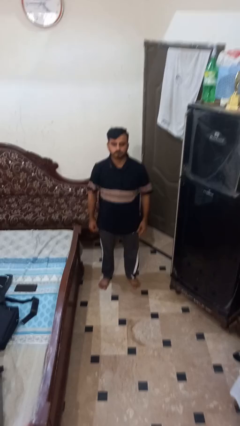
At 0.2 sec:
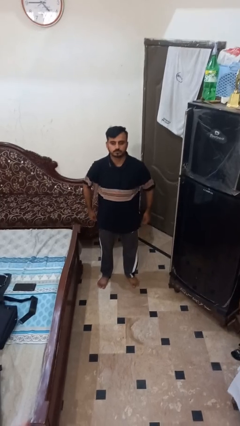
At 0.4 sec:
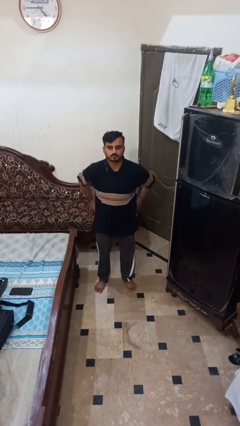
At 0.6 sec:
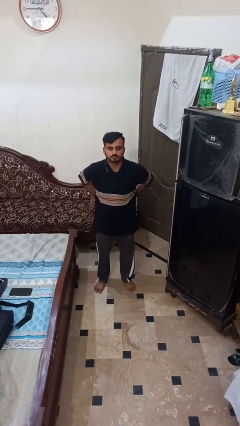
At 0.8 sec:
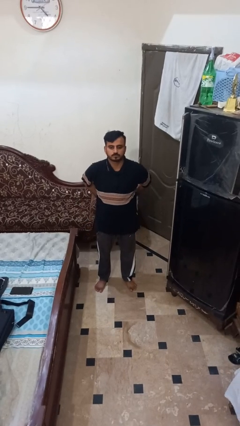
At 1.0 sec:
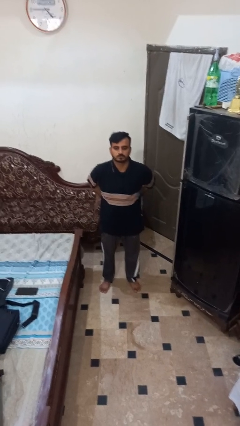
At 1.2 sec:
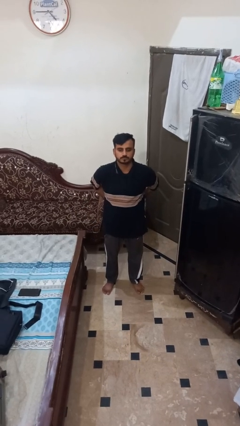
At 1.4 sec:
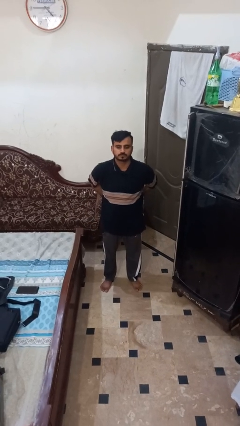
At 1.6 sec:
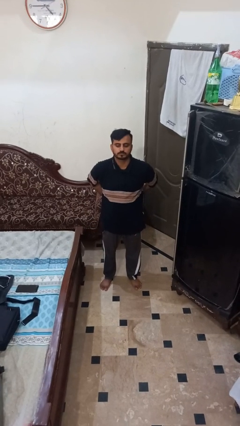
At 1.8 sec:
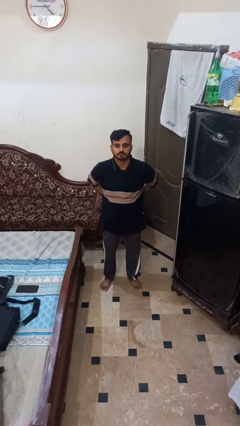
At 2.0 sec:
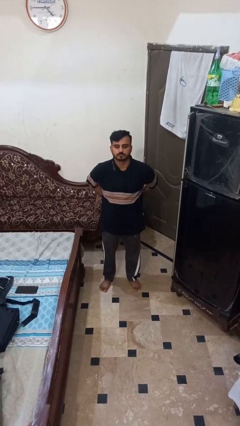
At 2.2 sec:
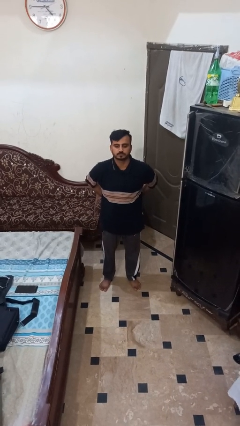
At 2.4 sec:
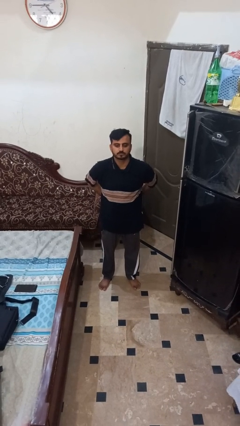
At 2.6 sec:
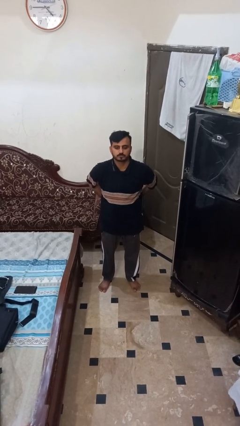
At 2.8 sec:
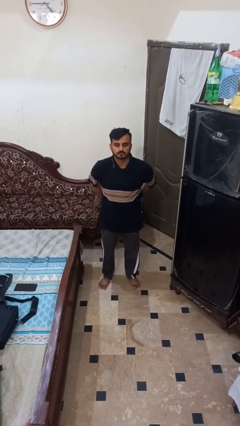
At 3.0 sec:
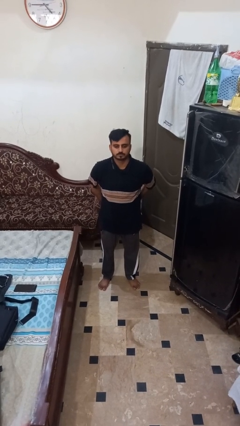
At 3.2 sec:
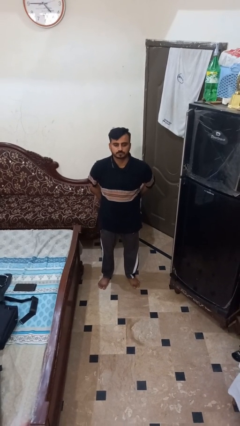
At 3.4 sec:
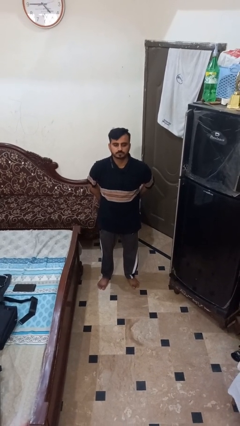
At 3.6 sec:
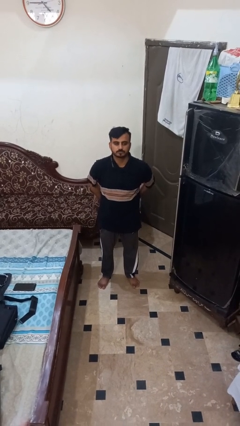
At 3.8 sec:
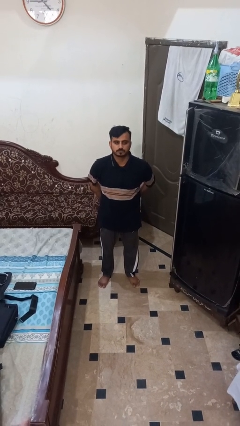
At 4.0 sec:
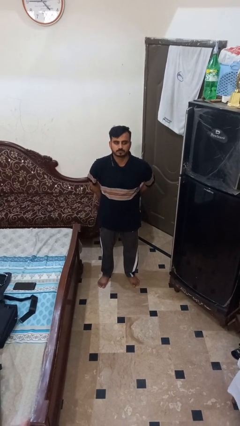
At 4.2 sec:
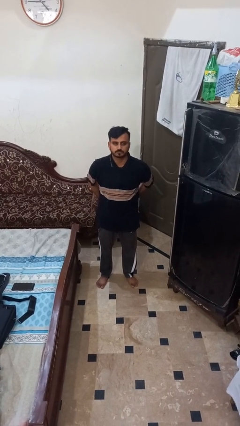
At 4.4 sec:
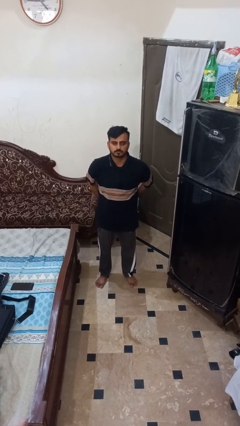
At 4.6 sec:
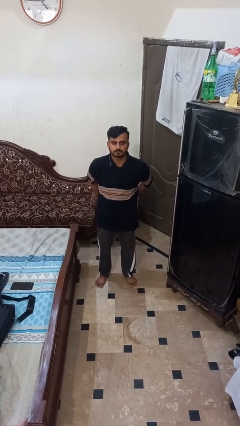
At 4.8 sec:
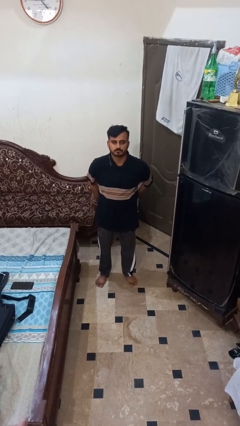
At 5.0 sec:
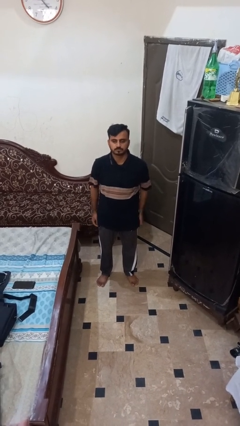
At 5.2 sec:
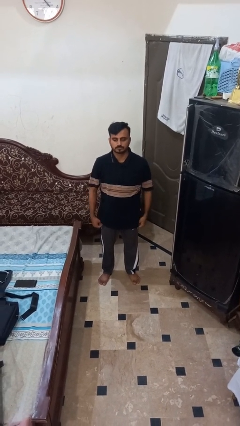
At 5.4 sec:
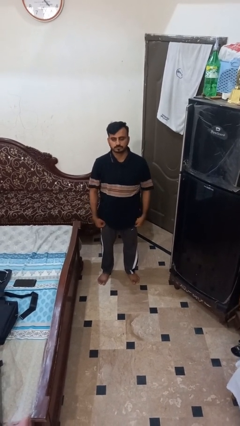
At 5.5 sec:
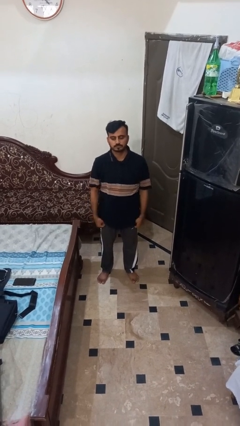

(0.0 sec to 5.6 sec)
person puts hands in back pockets

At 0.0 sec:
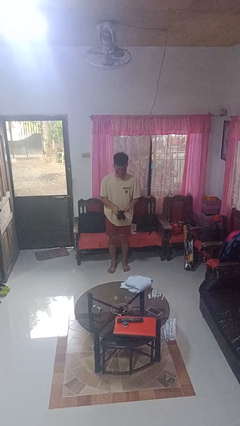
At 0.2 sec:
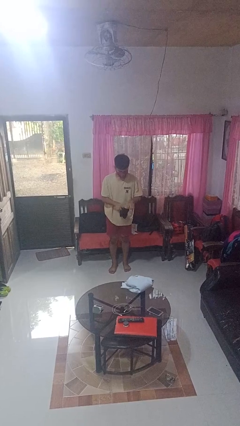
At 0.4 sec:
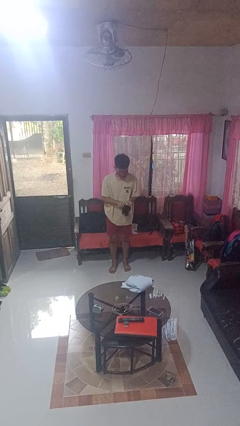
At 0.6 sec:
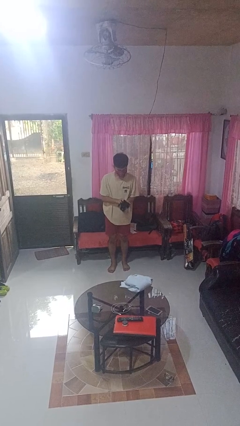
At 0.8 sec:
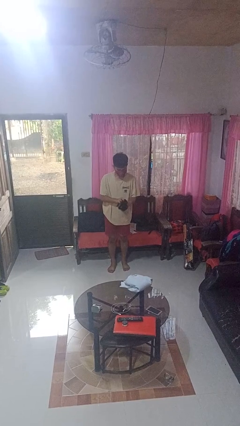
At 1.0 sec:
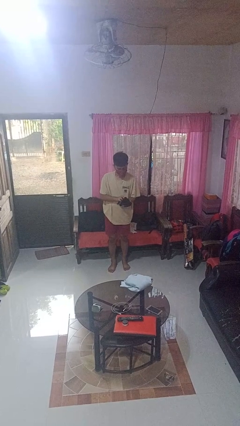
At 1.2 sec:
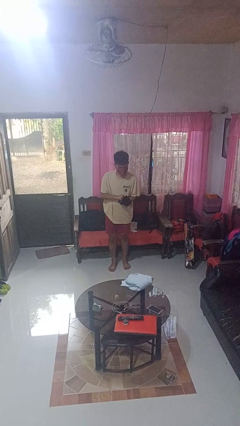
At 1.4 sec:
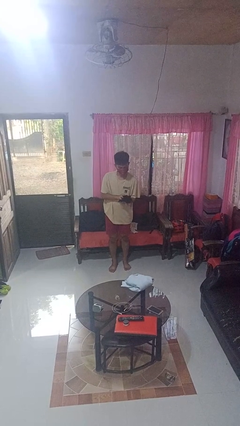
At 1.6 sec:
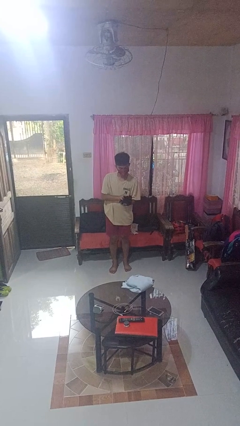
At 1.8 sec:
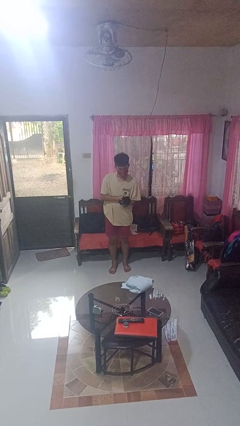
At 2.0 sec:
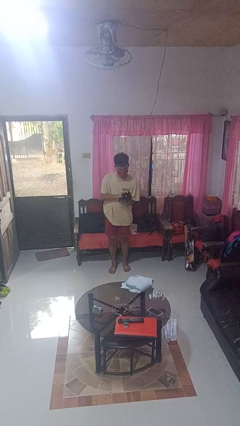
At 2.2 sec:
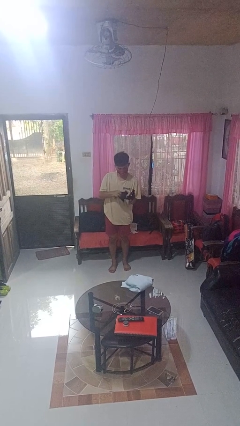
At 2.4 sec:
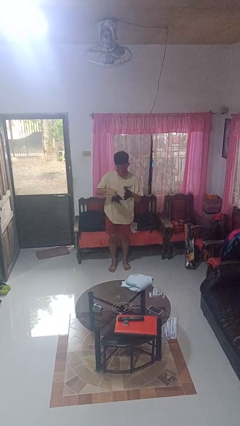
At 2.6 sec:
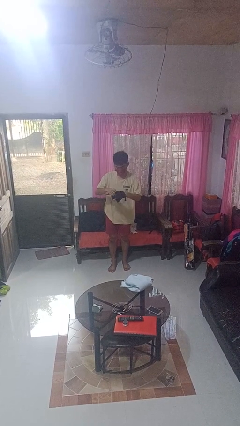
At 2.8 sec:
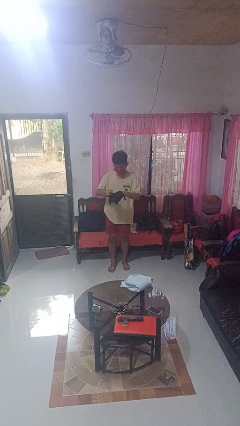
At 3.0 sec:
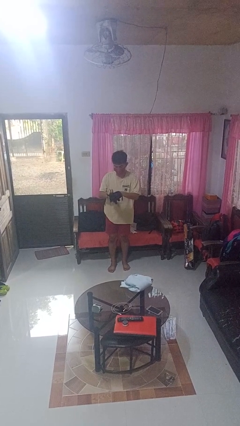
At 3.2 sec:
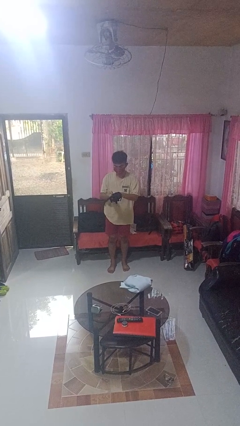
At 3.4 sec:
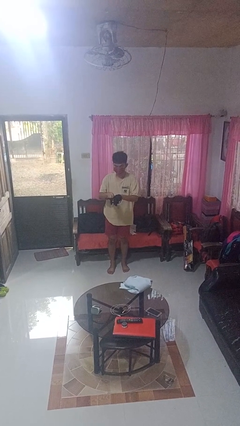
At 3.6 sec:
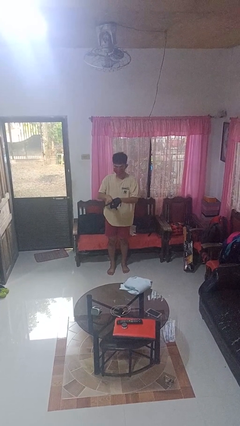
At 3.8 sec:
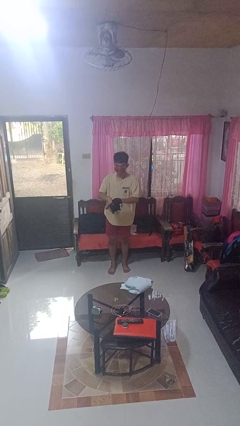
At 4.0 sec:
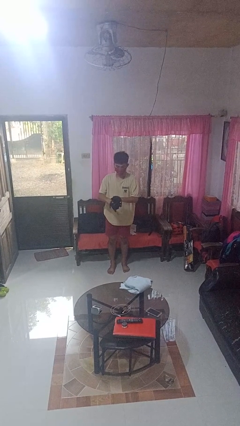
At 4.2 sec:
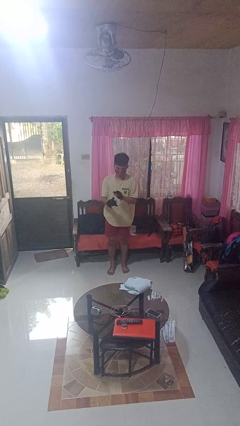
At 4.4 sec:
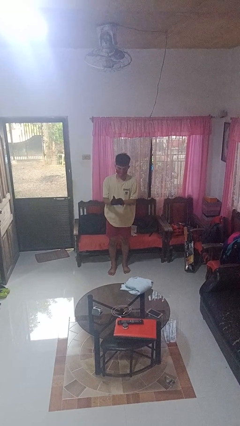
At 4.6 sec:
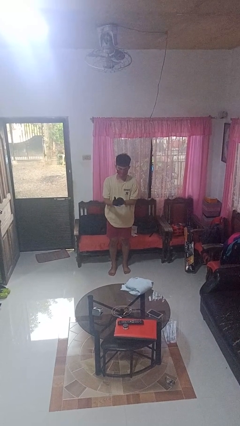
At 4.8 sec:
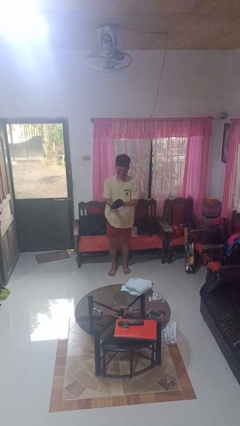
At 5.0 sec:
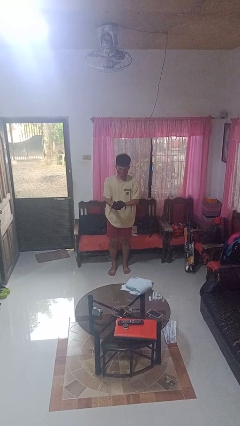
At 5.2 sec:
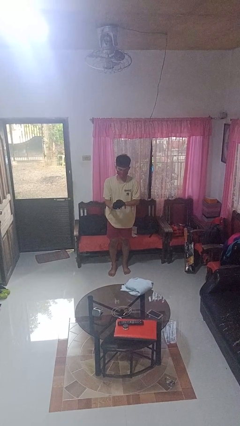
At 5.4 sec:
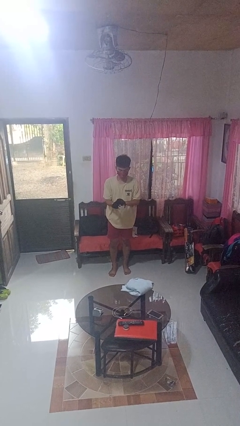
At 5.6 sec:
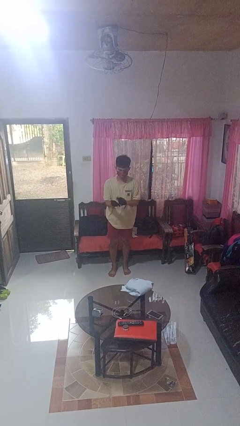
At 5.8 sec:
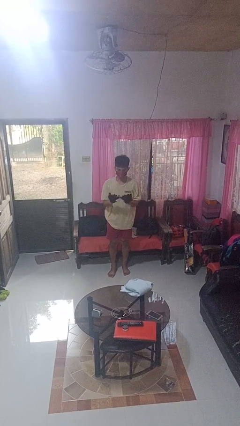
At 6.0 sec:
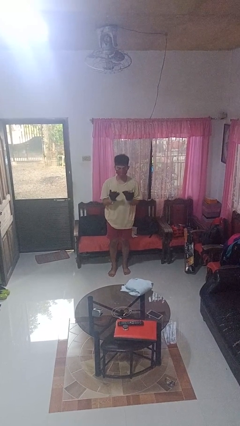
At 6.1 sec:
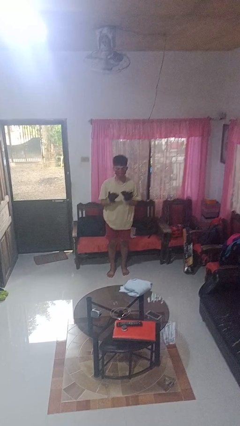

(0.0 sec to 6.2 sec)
person puts on gloves

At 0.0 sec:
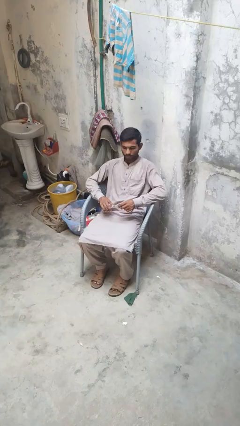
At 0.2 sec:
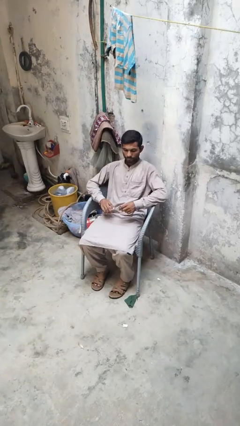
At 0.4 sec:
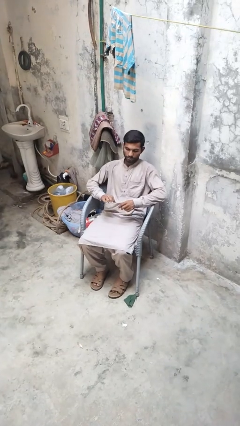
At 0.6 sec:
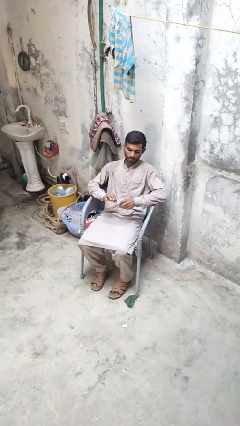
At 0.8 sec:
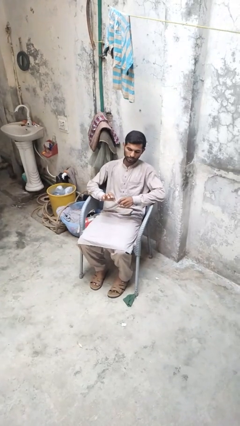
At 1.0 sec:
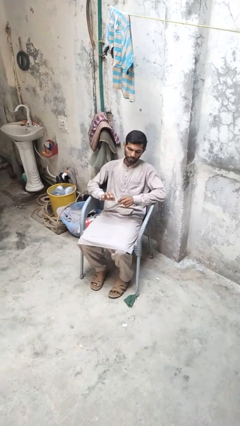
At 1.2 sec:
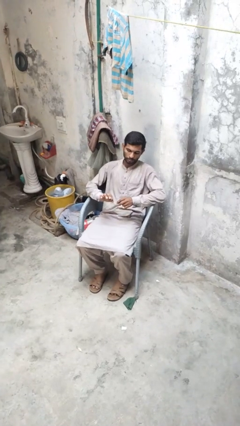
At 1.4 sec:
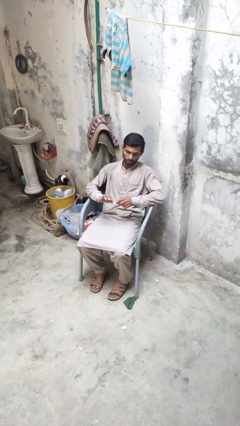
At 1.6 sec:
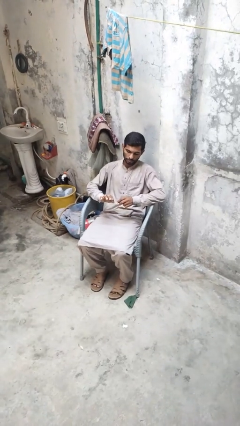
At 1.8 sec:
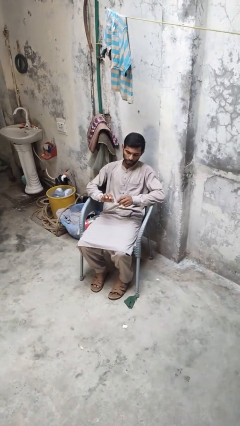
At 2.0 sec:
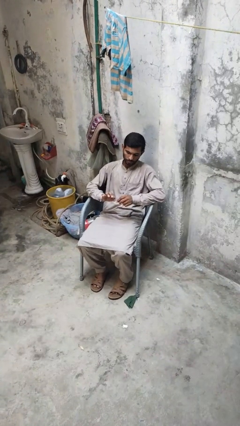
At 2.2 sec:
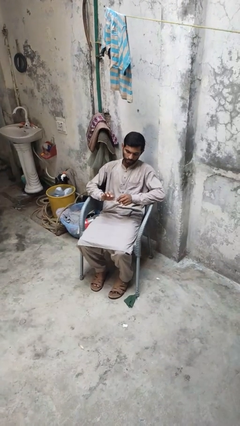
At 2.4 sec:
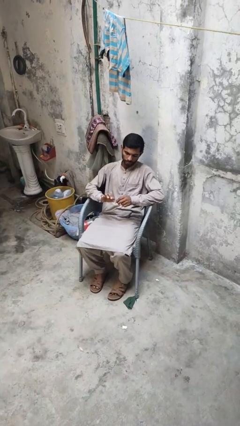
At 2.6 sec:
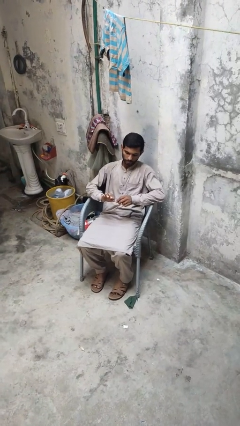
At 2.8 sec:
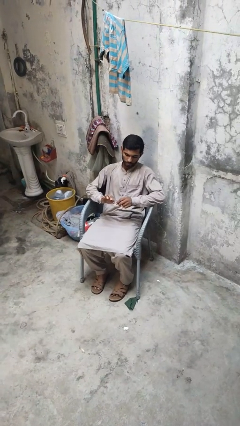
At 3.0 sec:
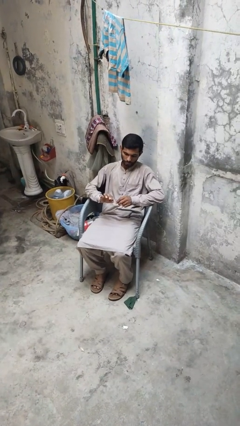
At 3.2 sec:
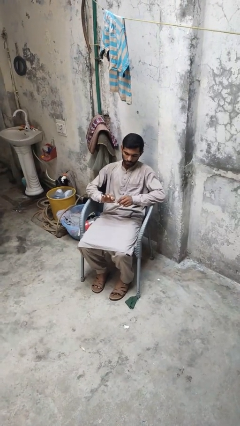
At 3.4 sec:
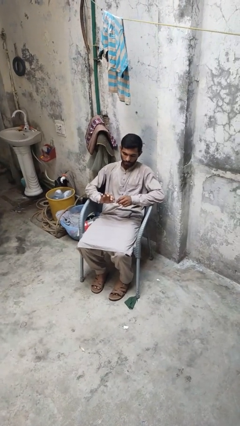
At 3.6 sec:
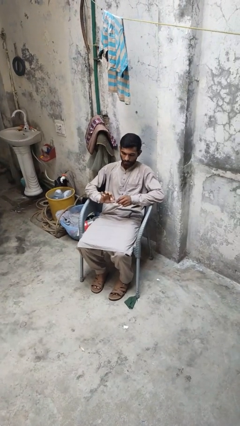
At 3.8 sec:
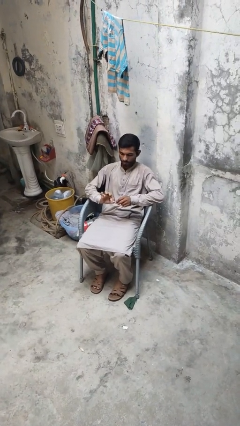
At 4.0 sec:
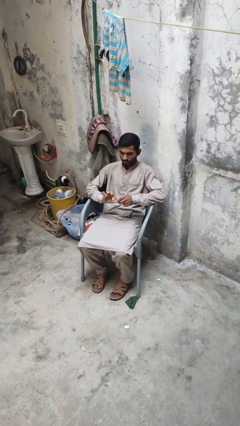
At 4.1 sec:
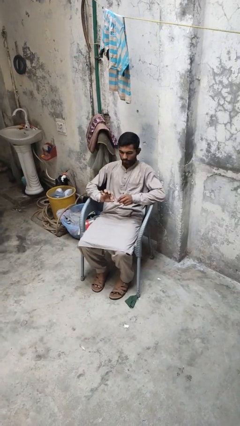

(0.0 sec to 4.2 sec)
person files fingernails

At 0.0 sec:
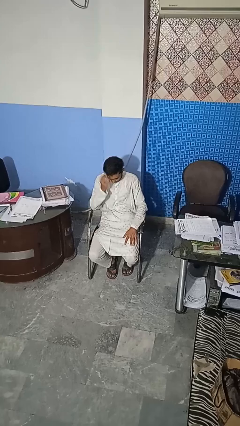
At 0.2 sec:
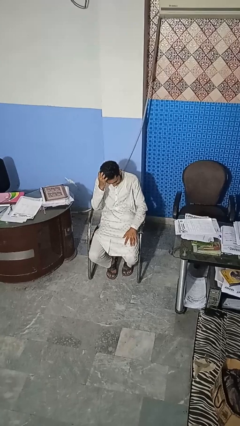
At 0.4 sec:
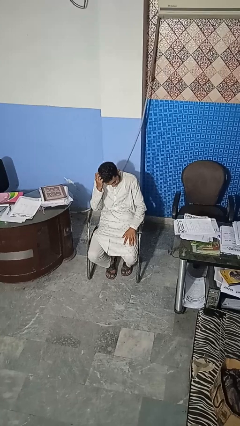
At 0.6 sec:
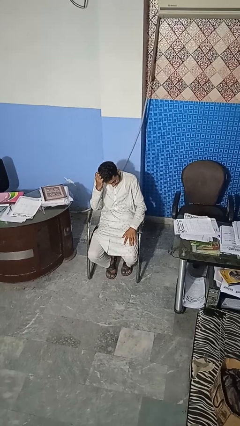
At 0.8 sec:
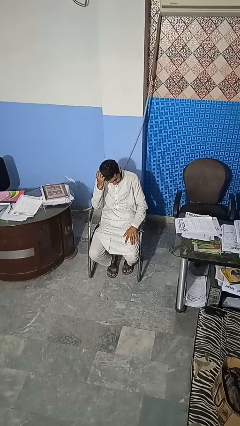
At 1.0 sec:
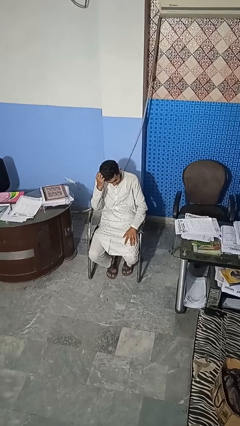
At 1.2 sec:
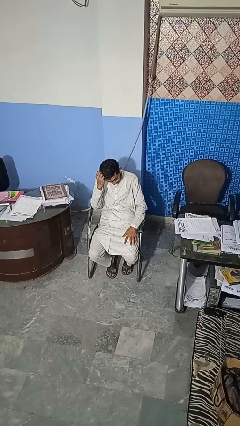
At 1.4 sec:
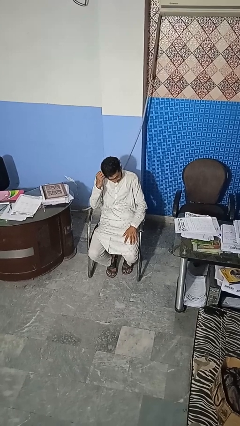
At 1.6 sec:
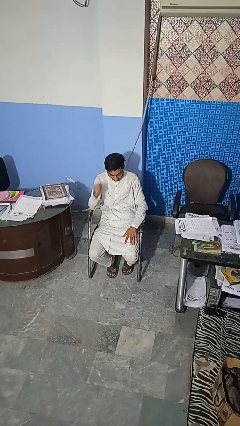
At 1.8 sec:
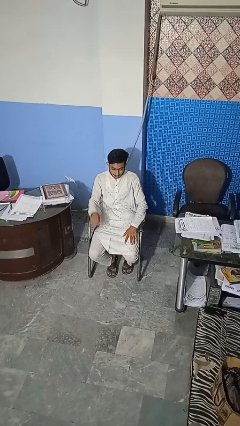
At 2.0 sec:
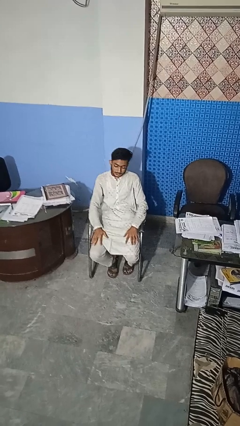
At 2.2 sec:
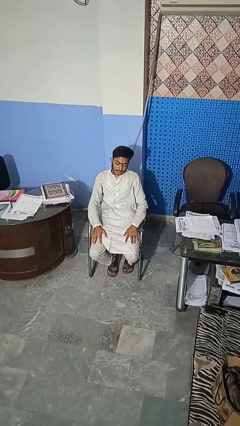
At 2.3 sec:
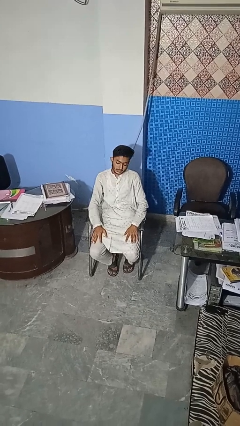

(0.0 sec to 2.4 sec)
person scratches face
